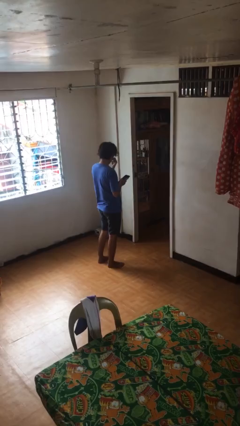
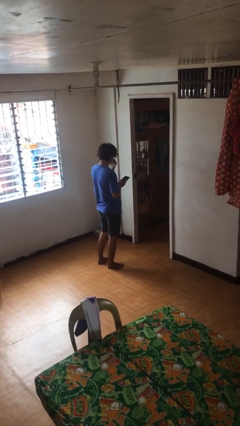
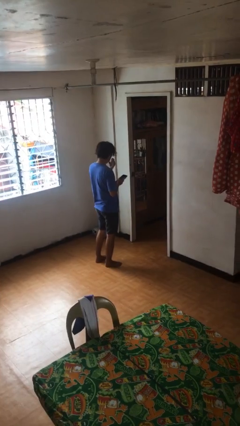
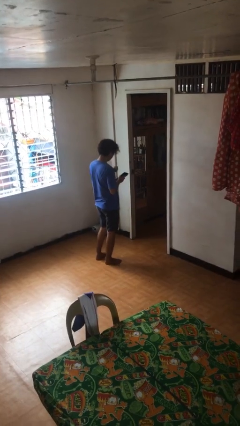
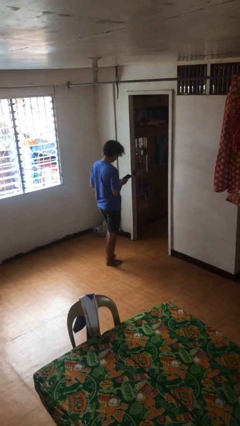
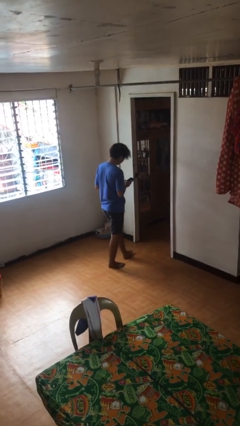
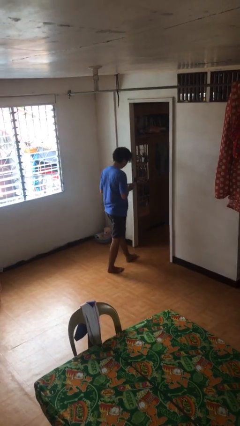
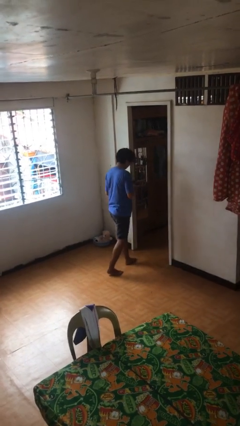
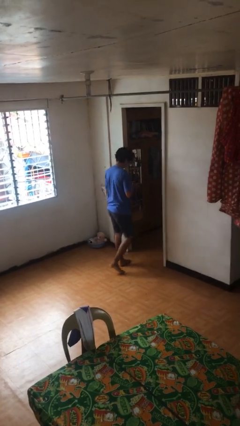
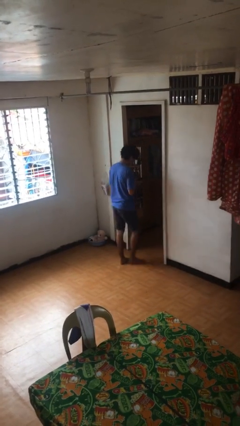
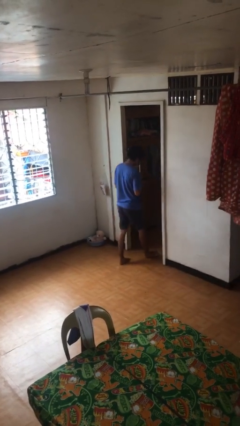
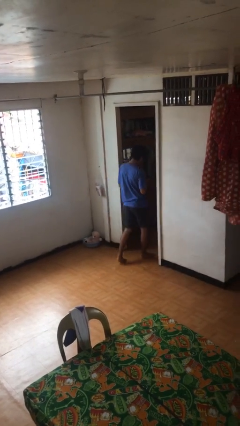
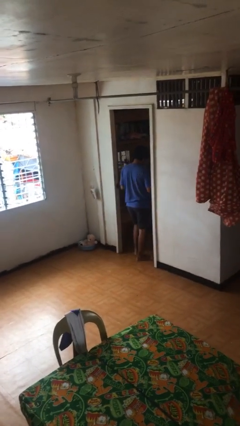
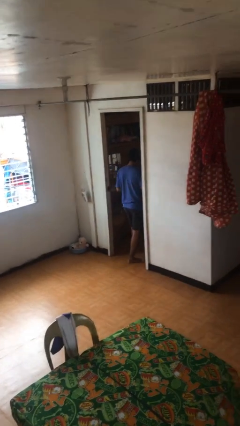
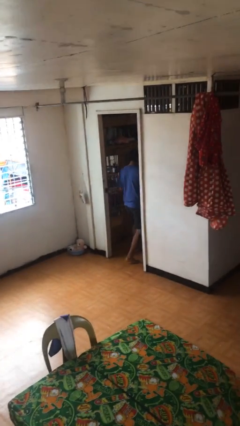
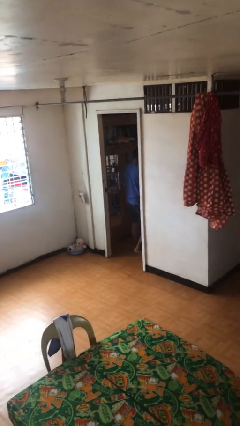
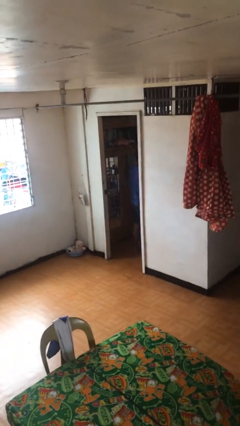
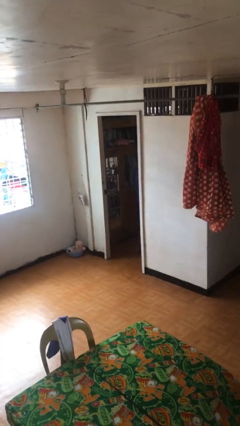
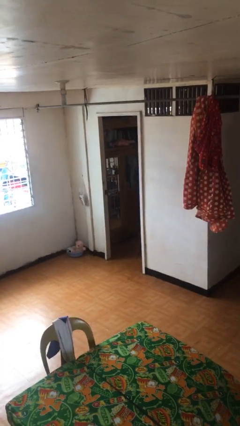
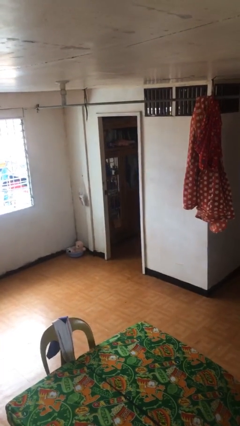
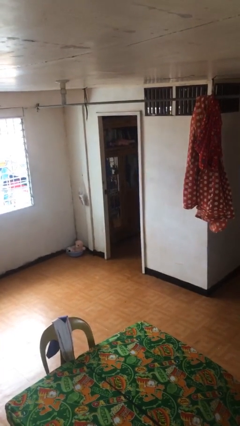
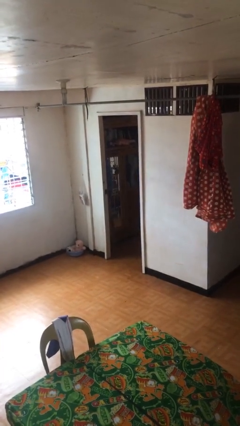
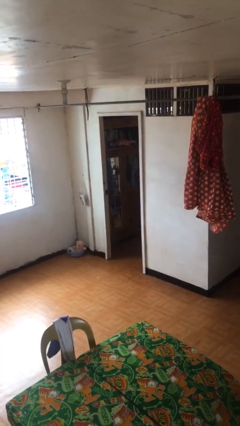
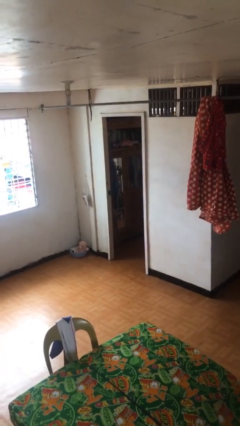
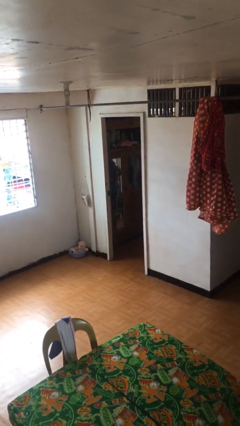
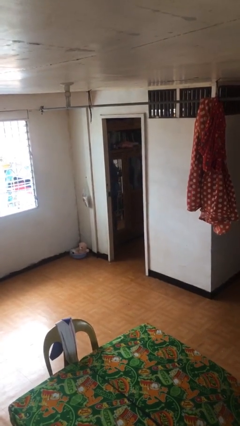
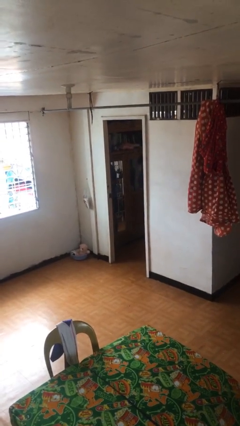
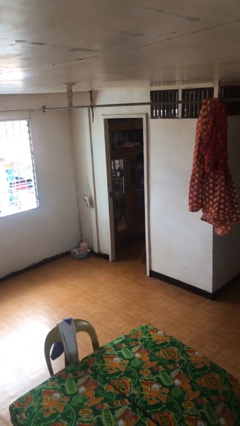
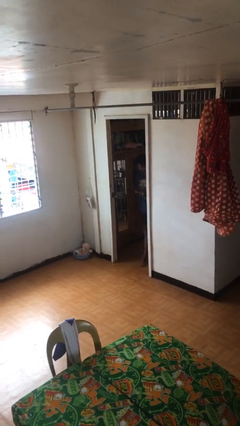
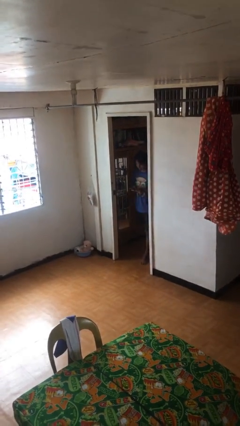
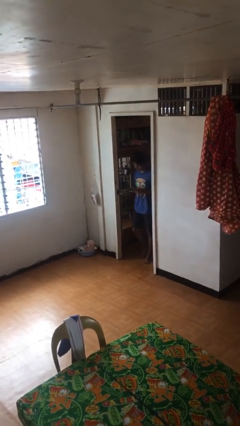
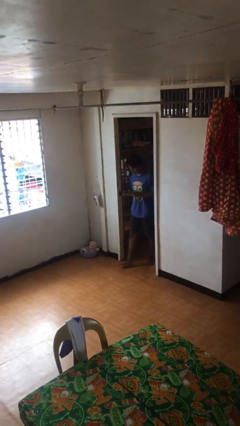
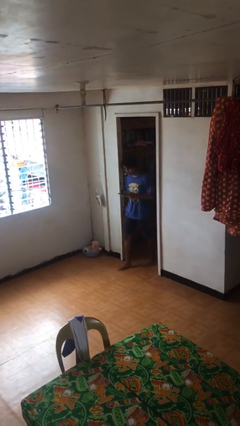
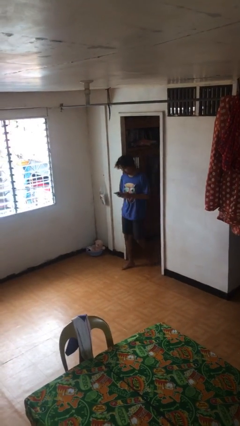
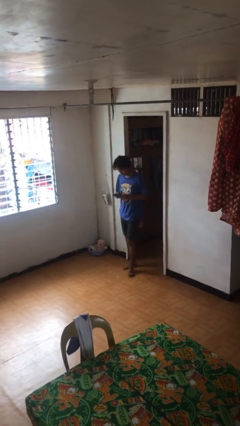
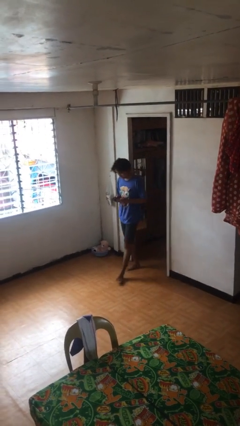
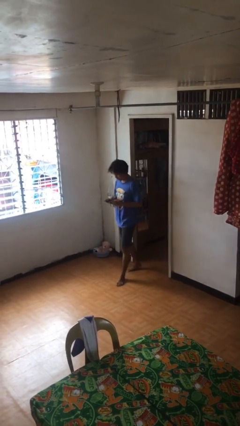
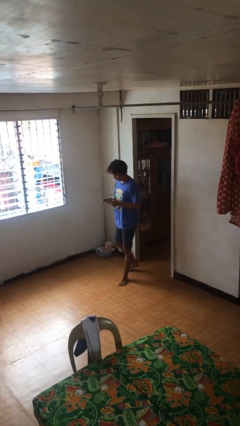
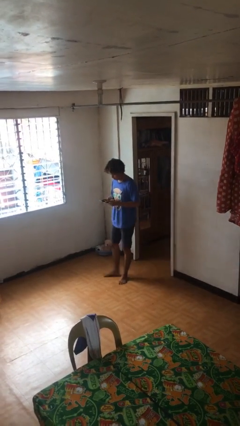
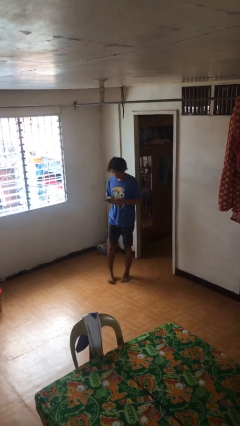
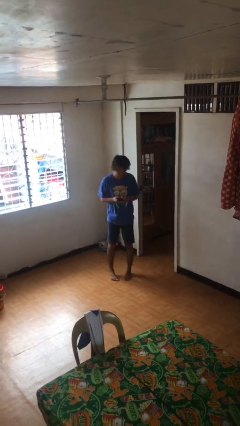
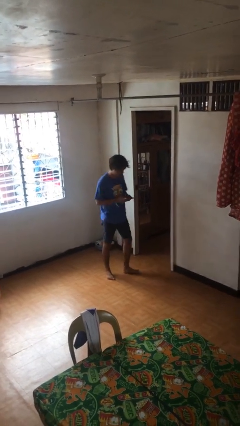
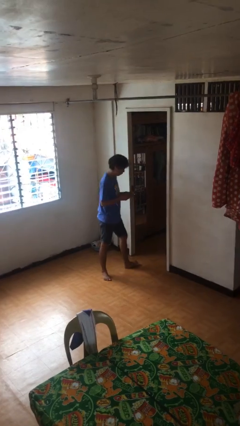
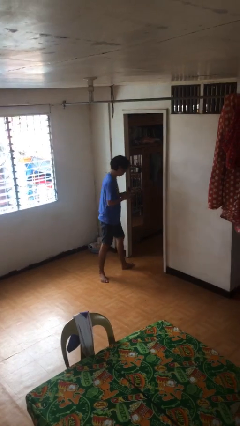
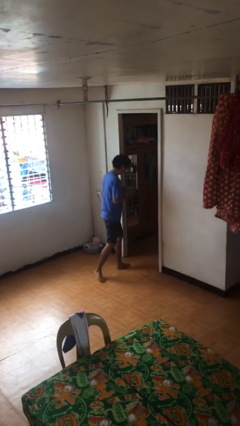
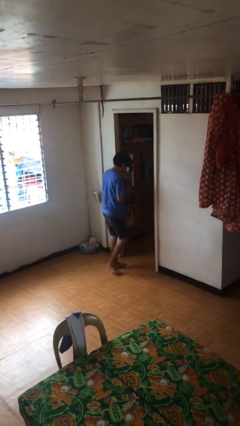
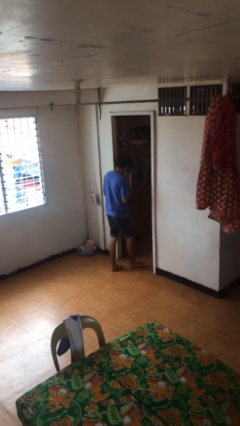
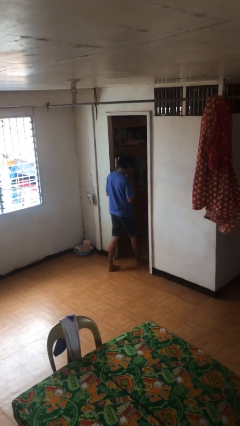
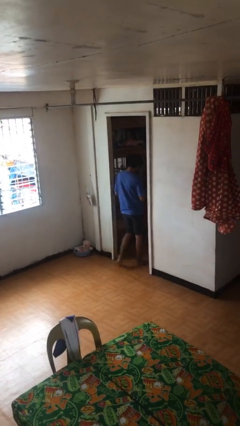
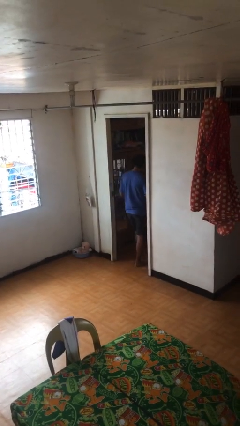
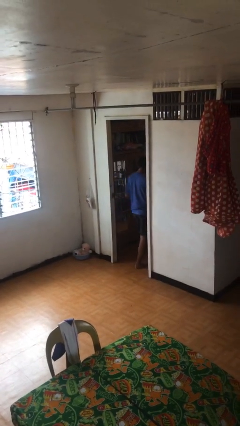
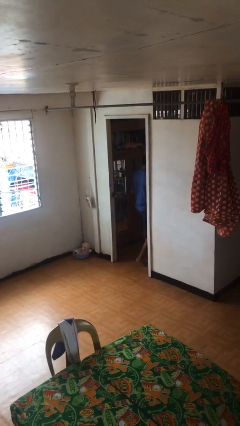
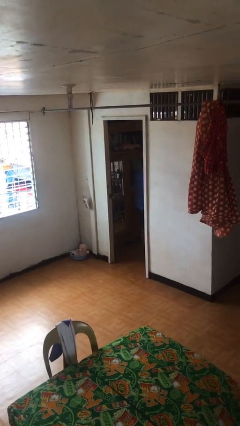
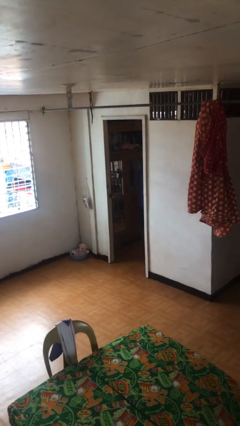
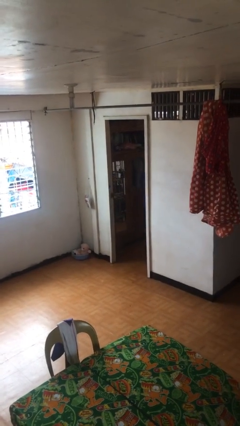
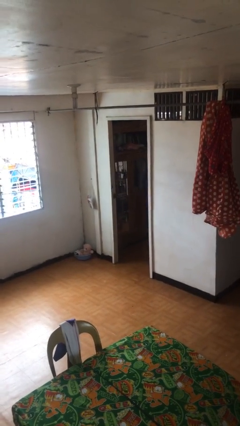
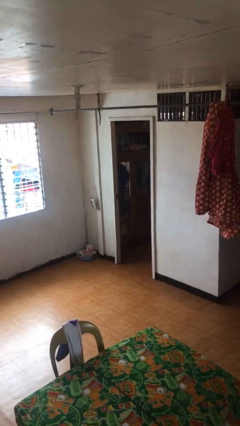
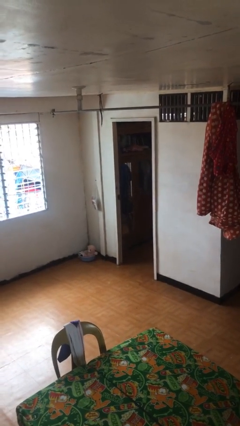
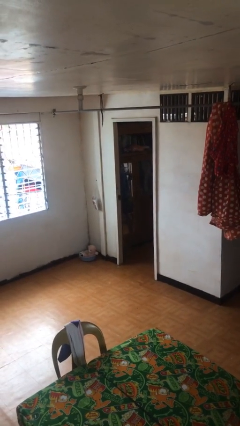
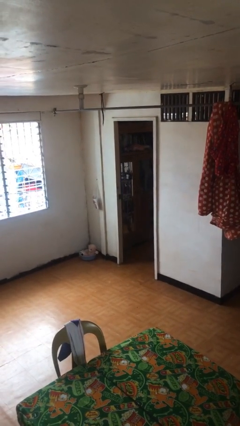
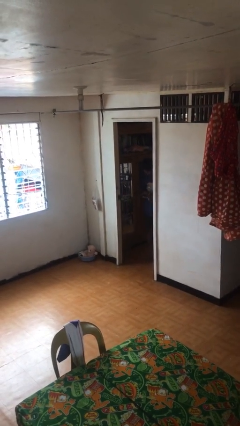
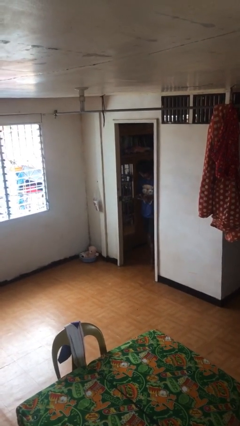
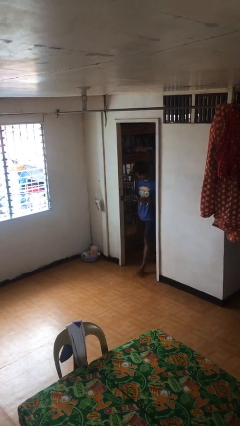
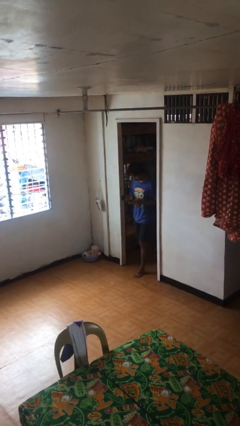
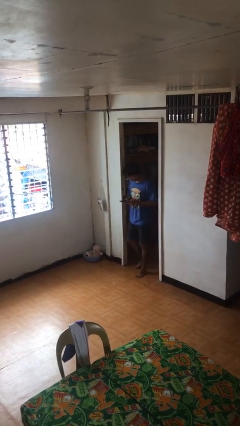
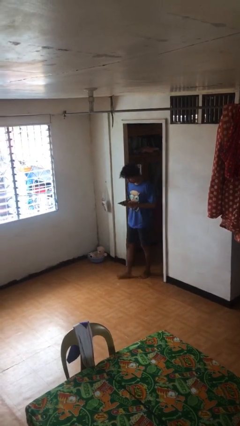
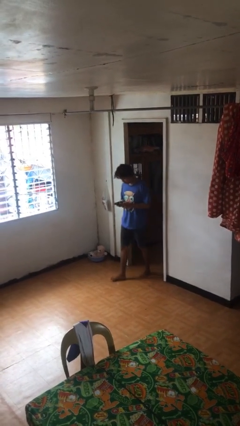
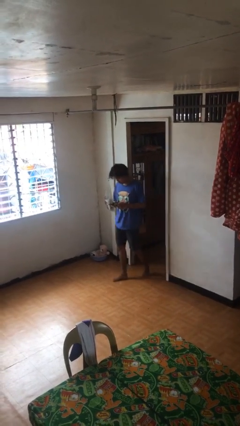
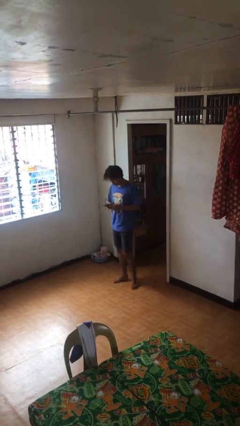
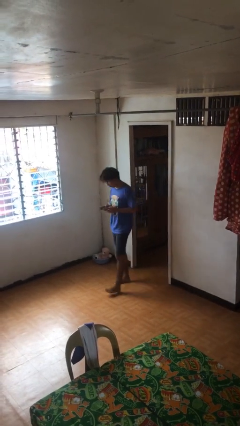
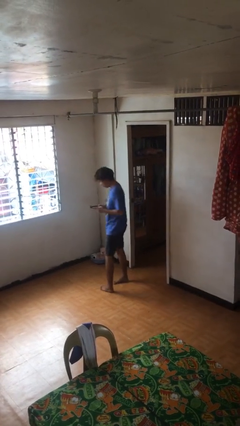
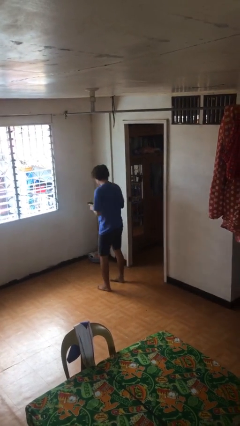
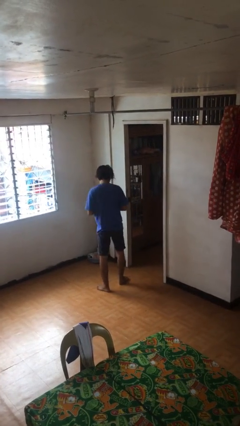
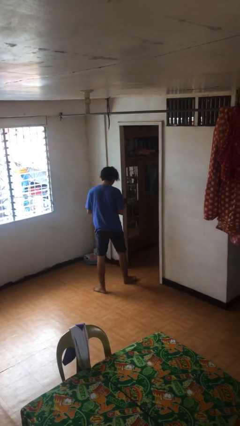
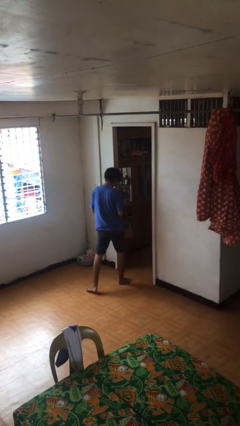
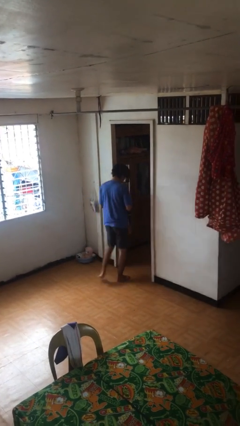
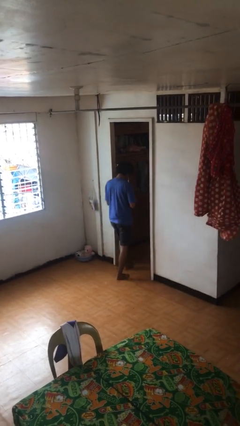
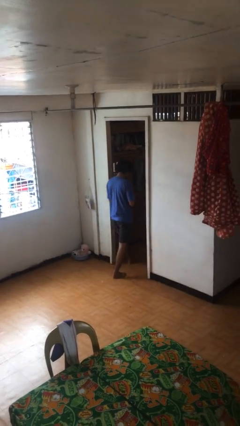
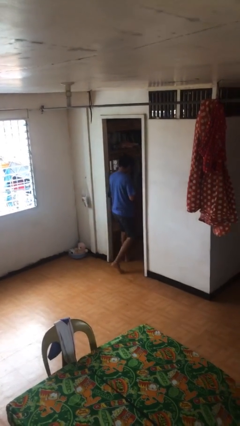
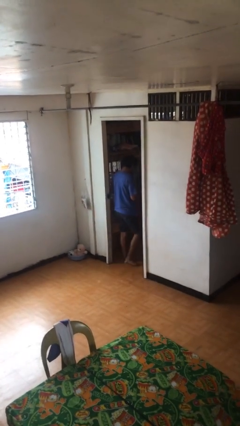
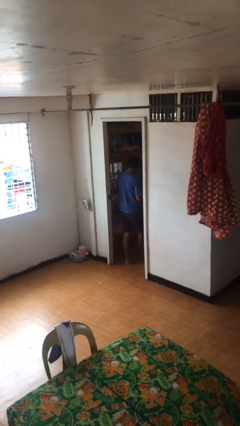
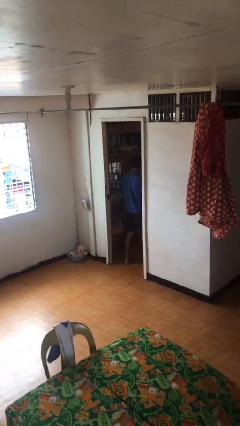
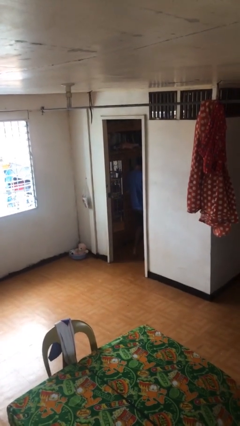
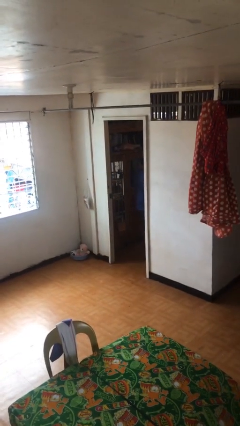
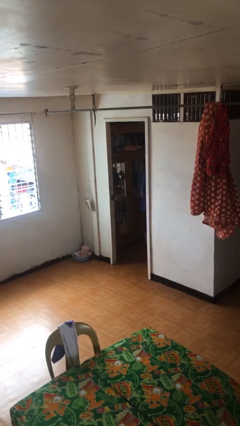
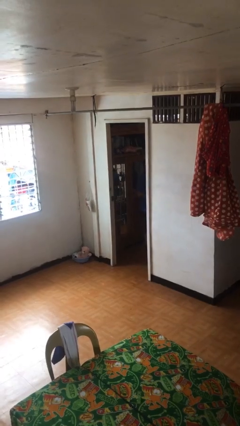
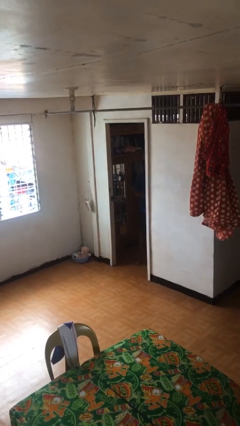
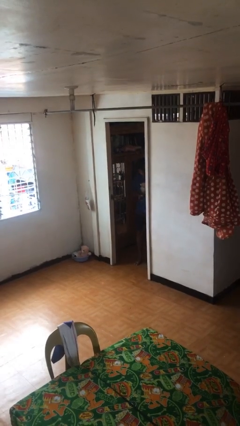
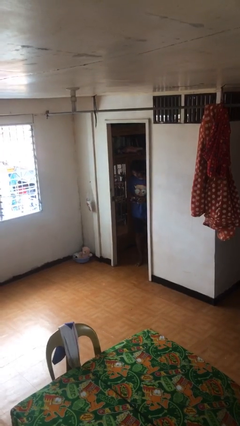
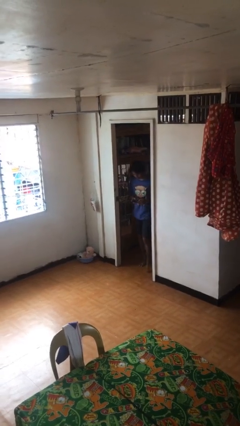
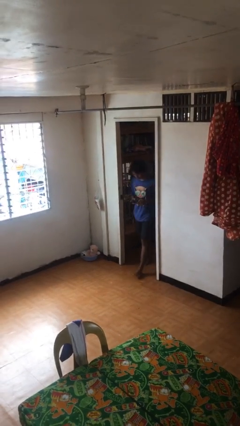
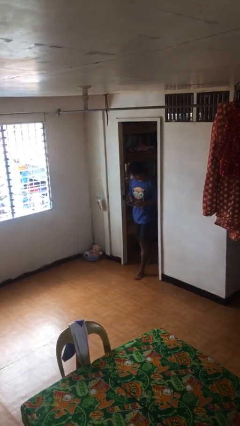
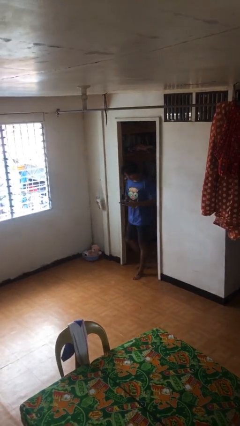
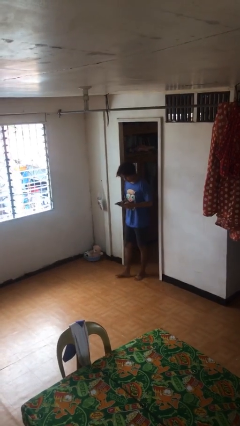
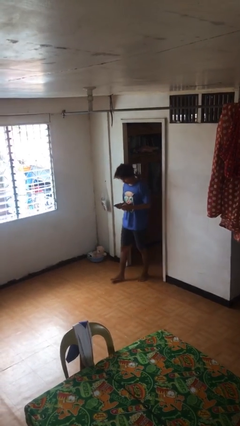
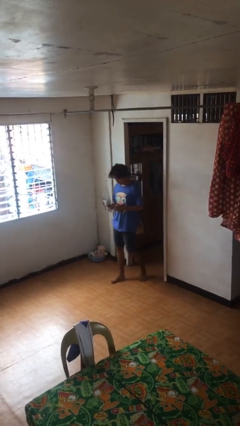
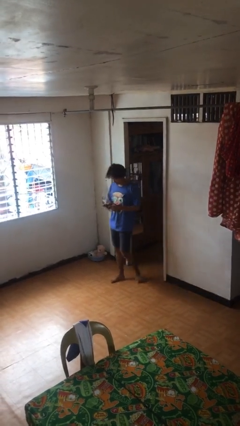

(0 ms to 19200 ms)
person texts on phone
